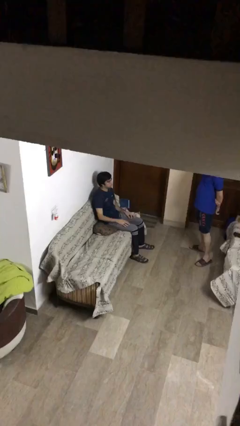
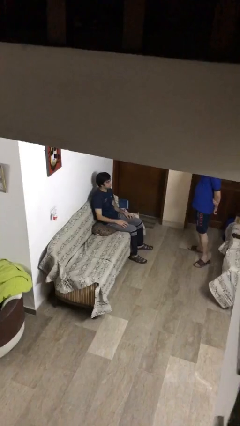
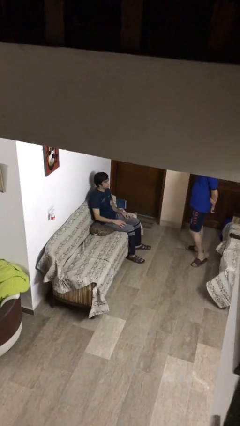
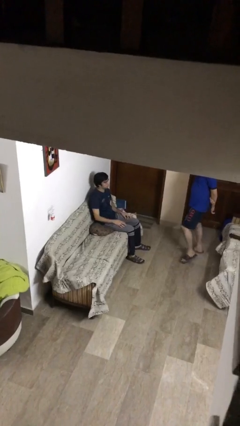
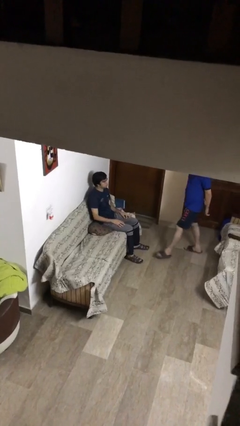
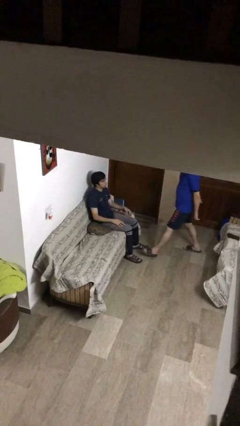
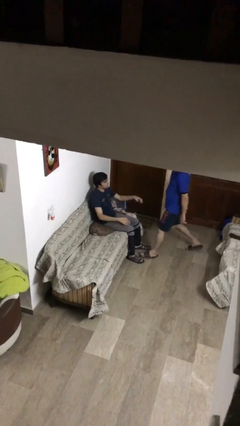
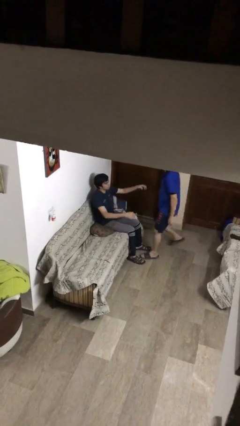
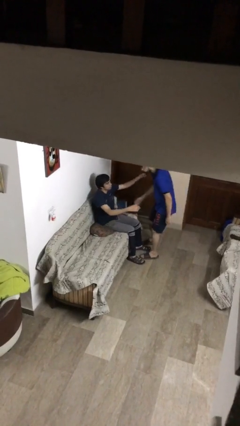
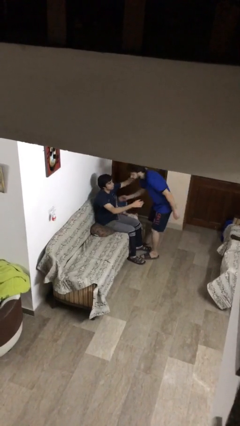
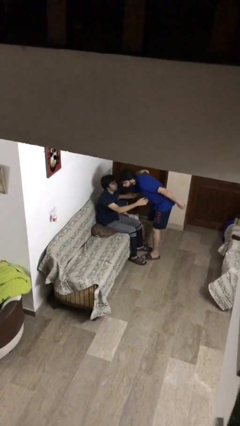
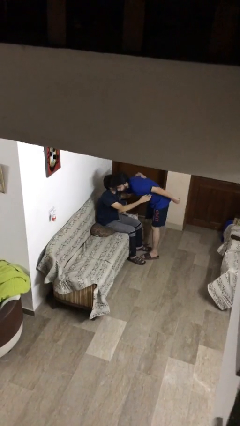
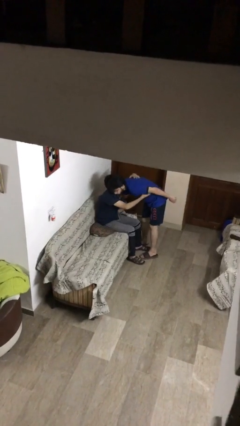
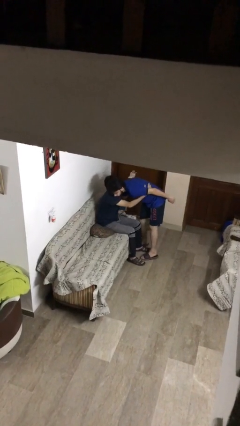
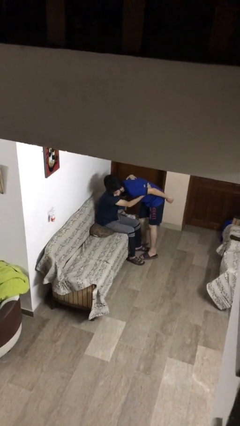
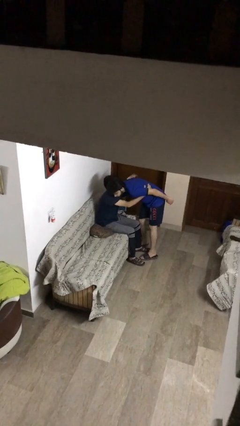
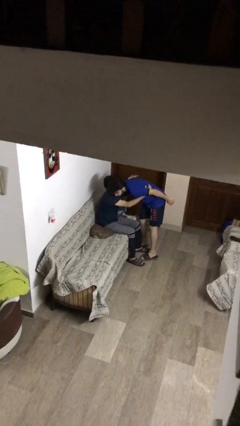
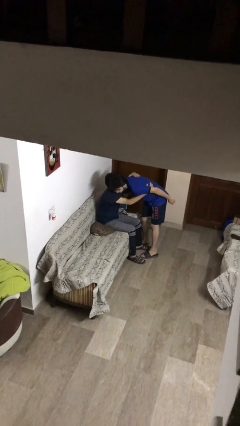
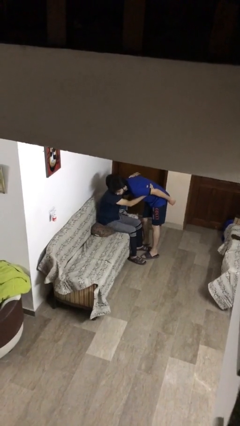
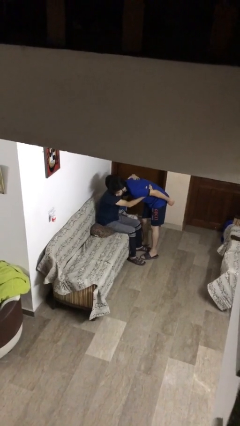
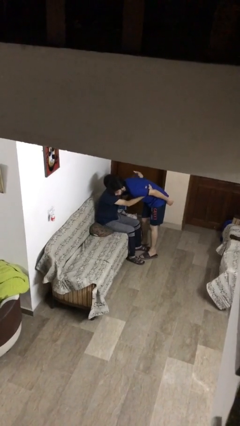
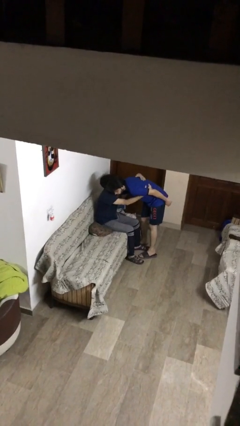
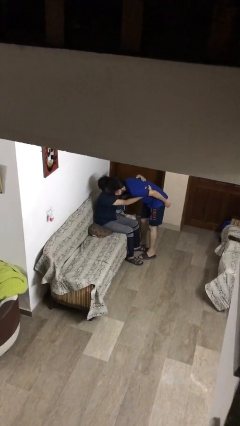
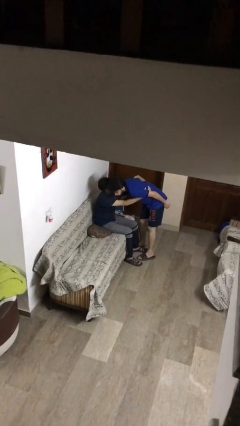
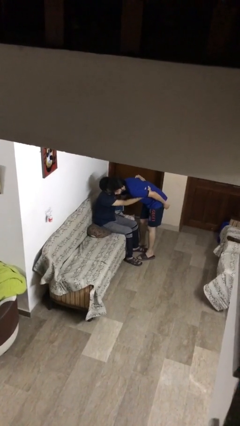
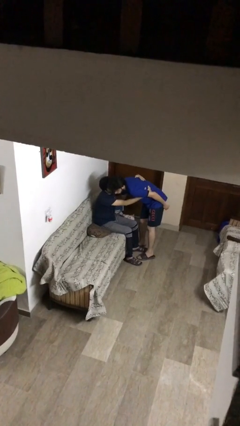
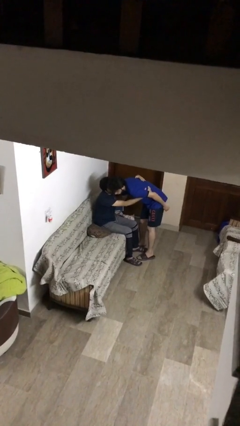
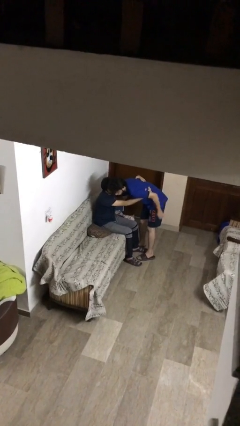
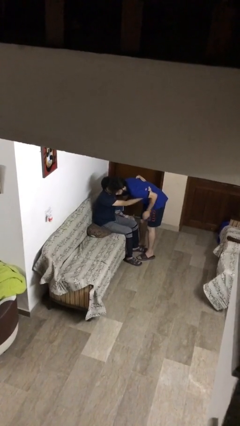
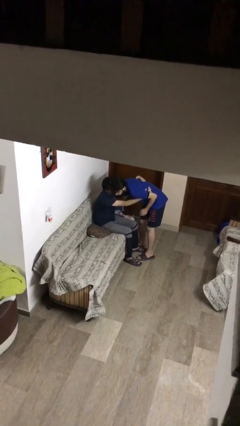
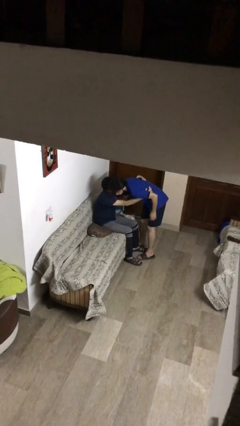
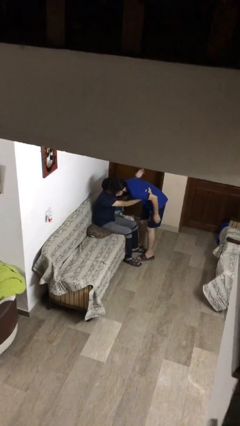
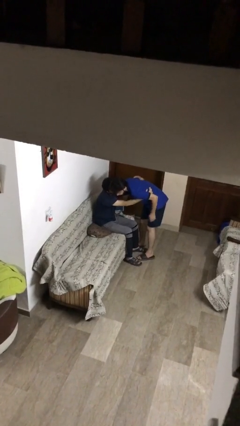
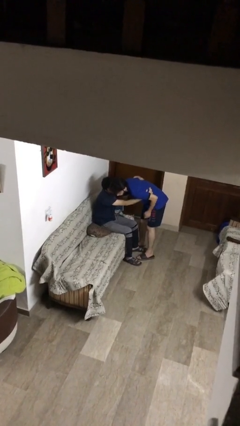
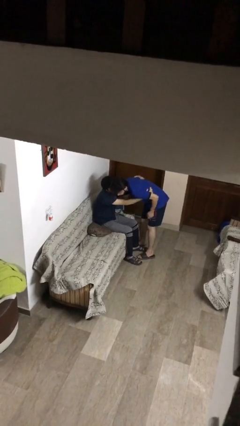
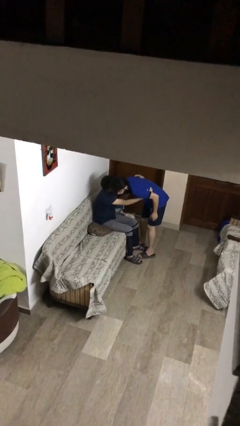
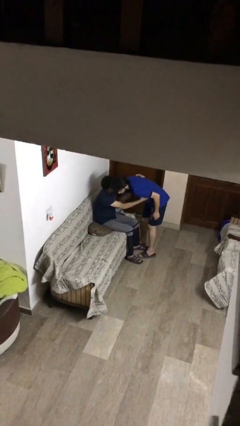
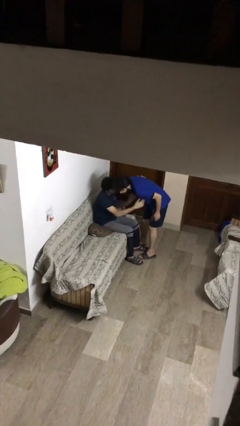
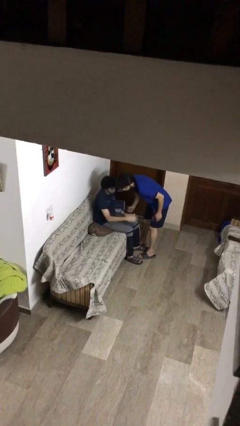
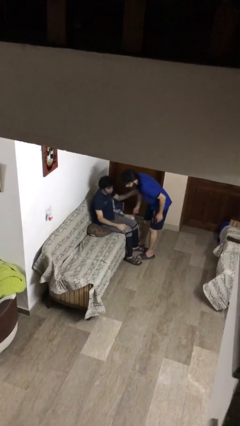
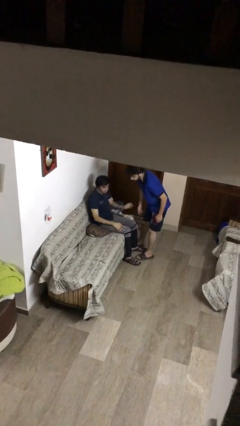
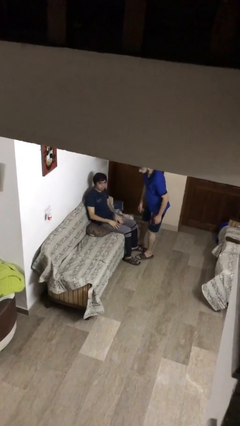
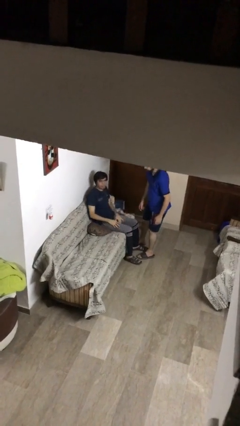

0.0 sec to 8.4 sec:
person embraces person

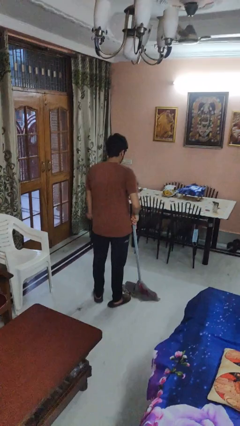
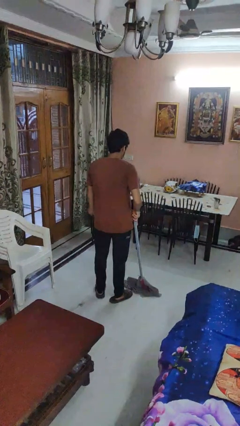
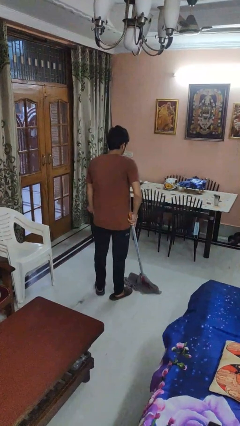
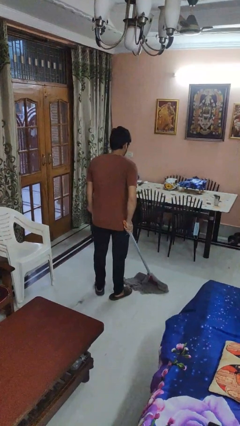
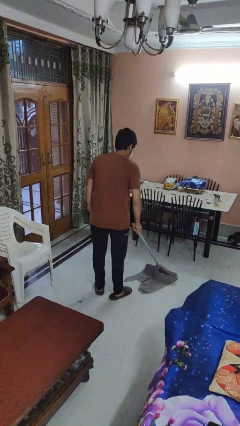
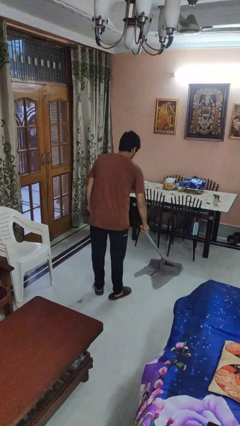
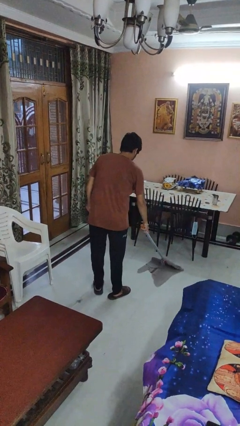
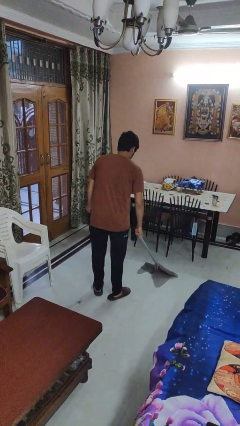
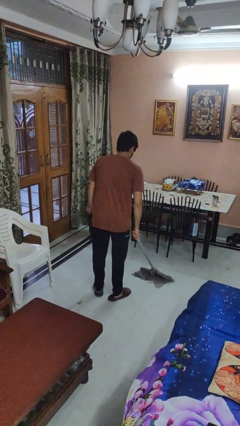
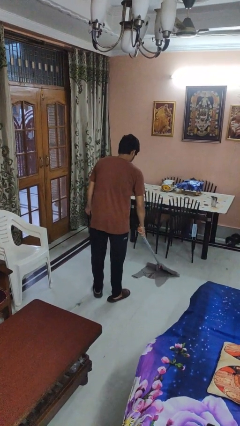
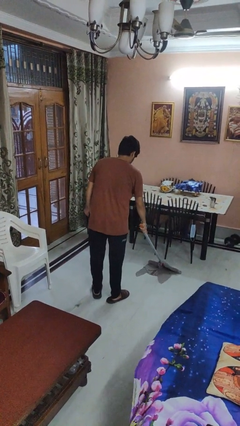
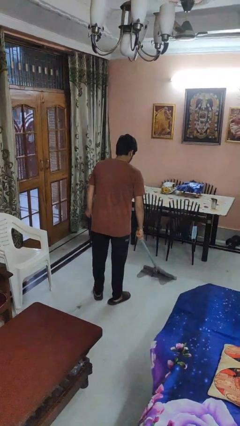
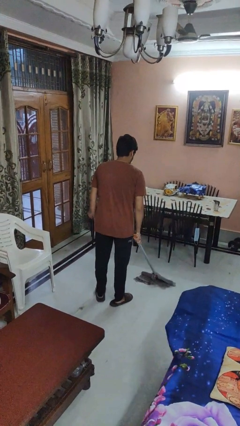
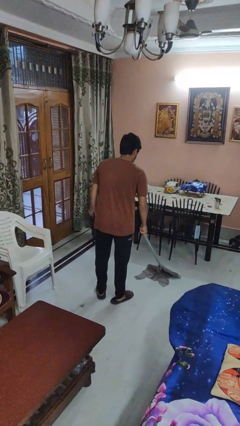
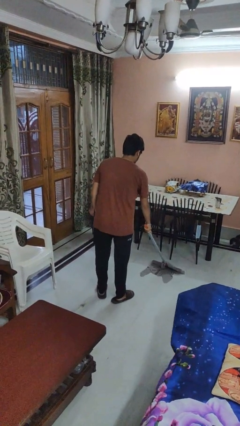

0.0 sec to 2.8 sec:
person mops

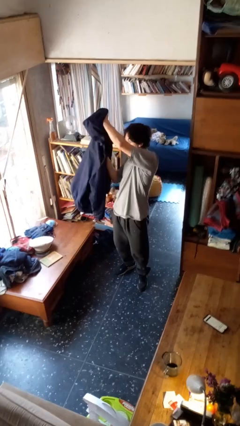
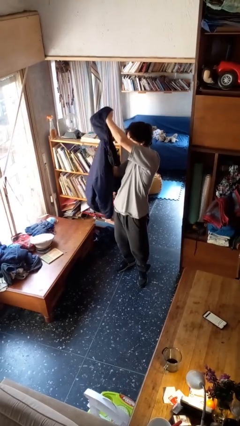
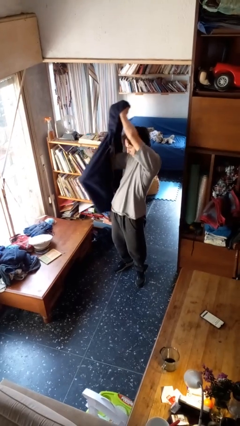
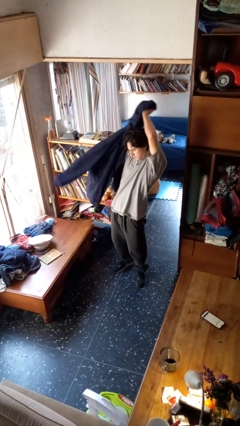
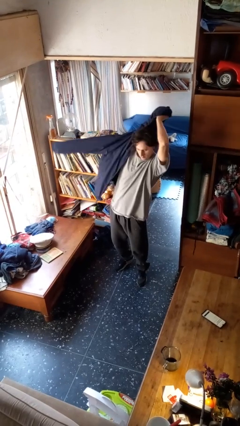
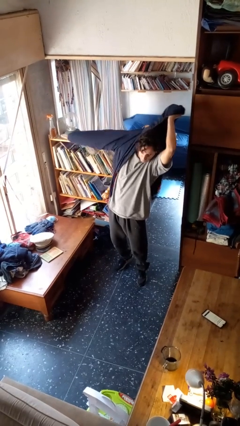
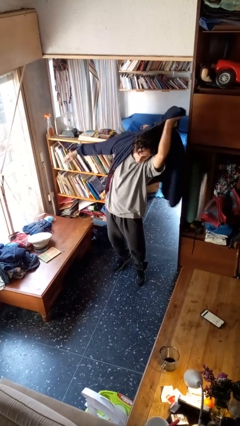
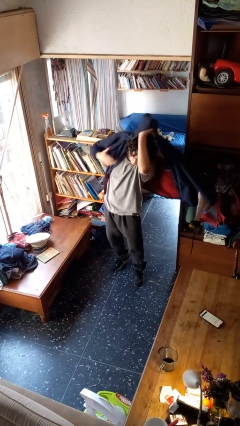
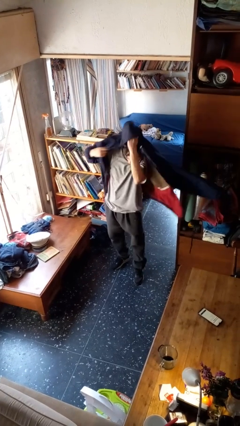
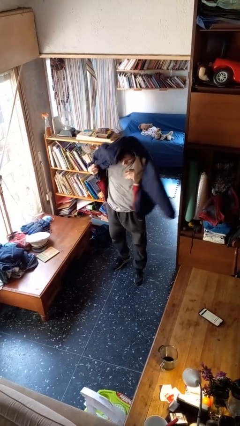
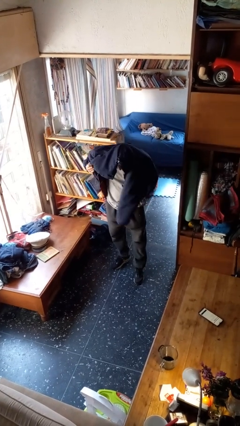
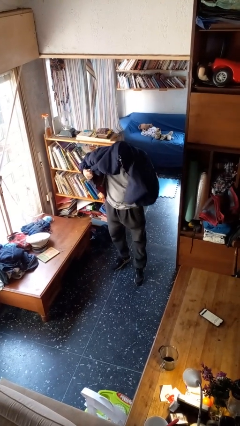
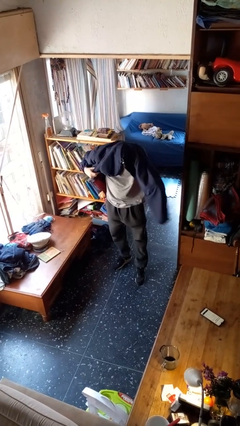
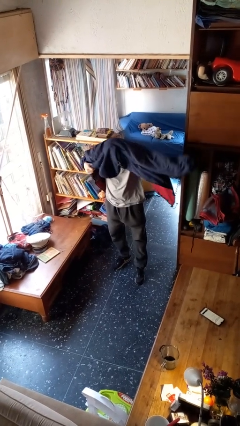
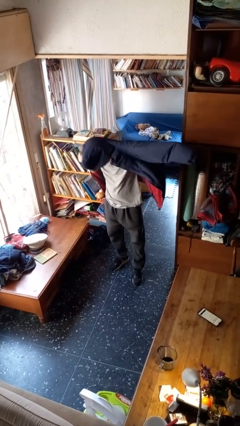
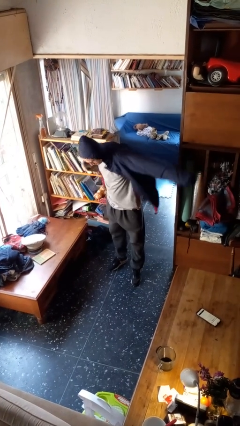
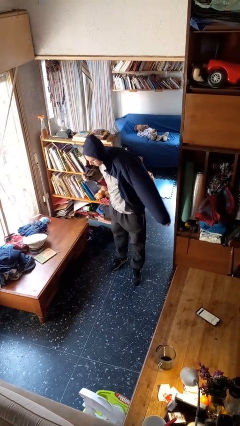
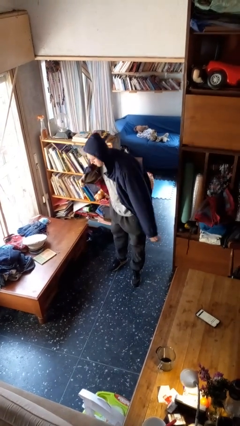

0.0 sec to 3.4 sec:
person puts on hoodie

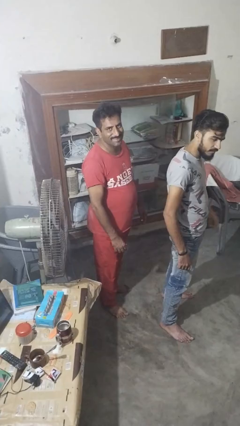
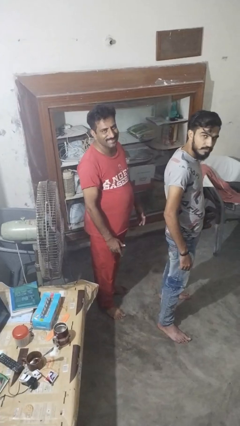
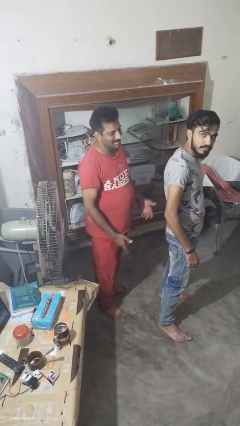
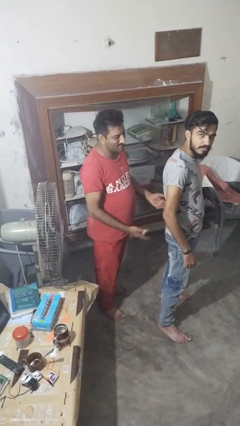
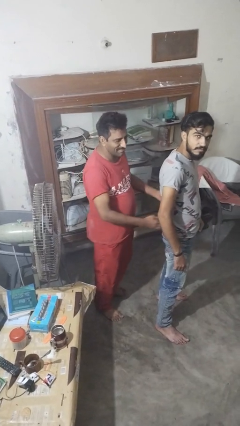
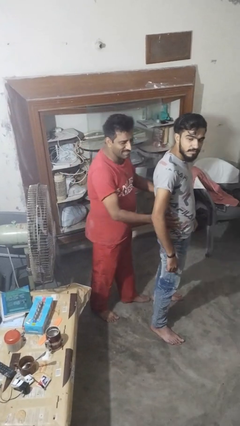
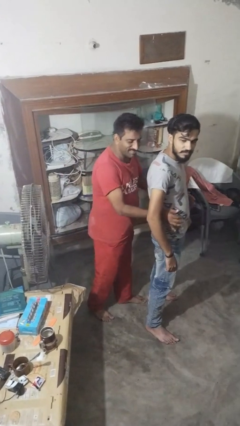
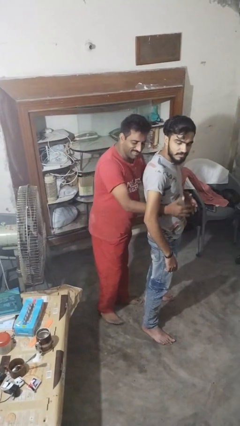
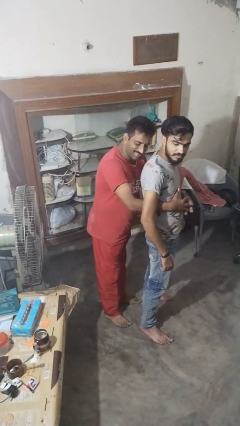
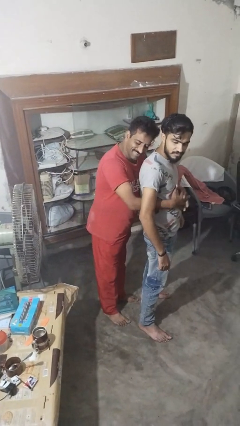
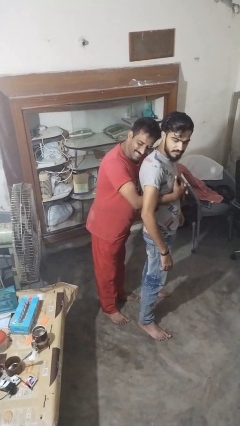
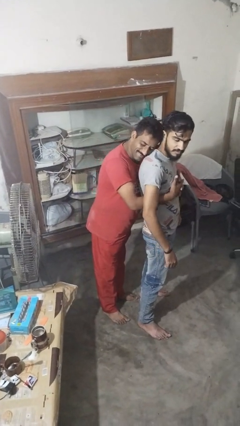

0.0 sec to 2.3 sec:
person hugs person from behind

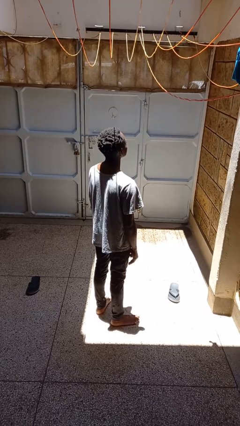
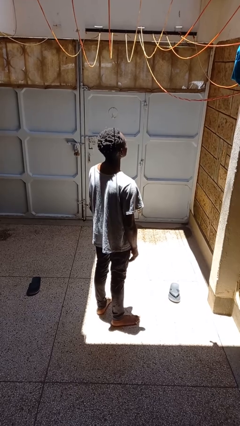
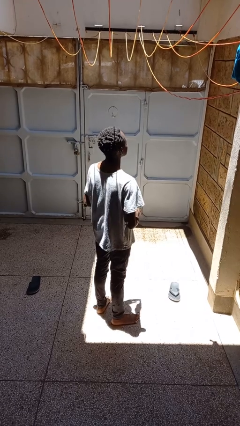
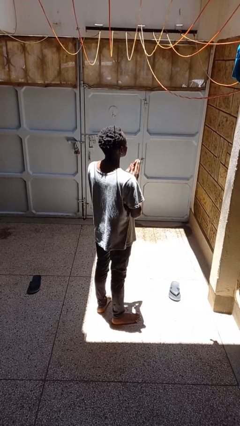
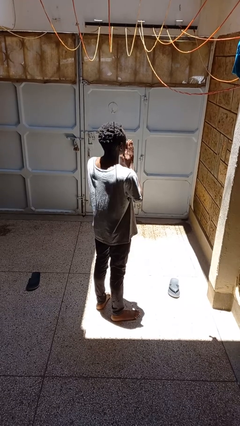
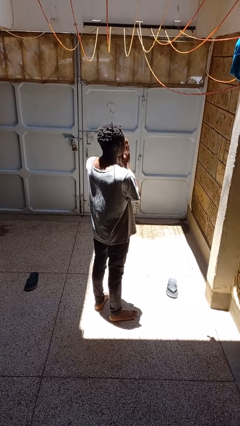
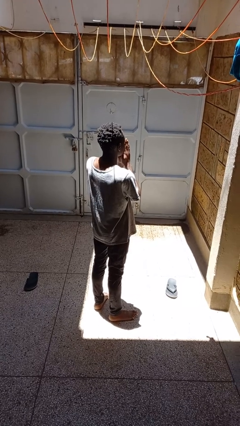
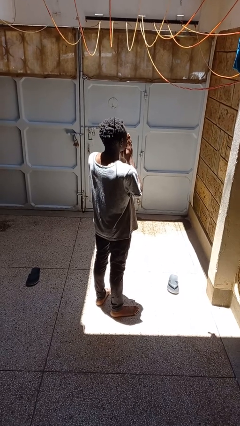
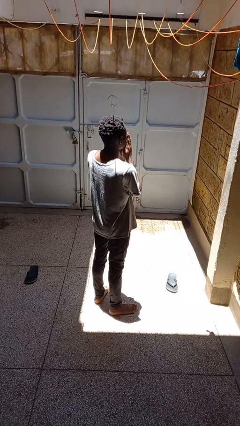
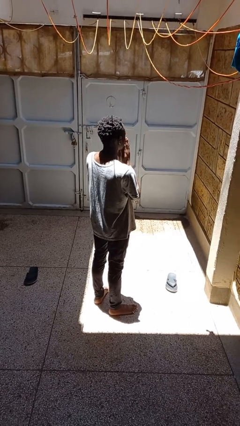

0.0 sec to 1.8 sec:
person prays
